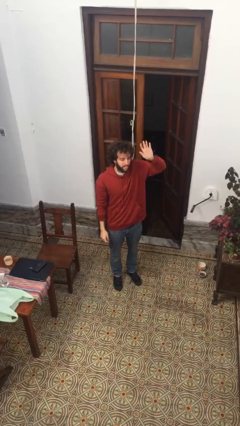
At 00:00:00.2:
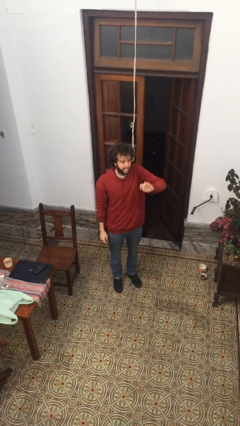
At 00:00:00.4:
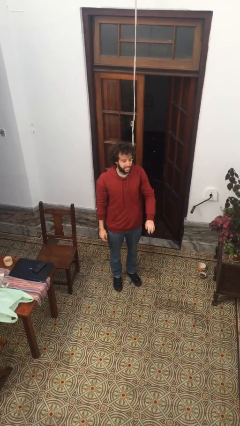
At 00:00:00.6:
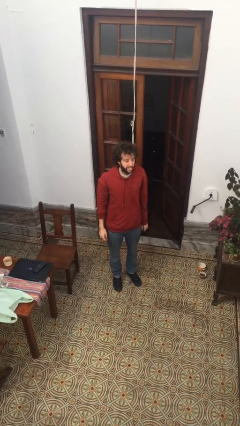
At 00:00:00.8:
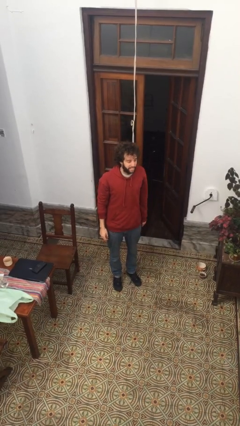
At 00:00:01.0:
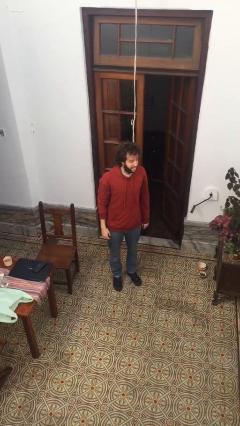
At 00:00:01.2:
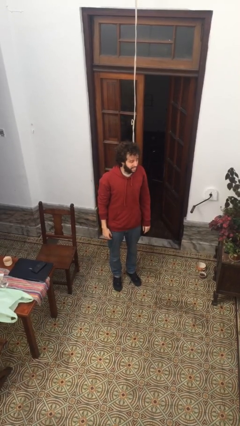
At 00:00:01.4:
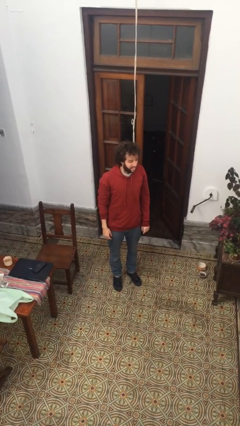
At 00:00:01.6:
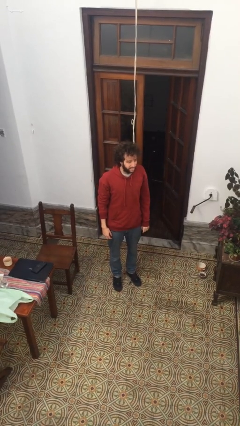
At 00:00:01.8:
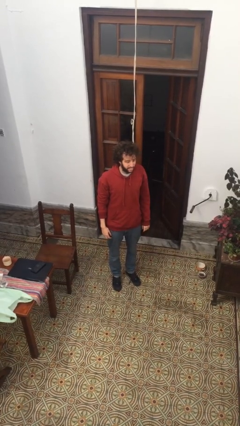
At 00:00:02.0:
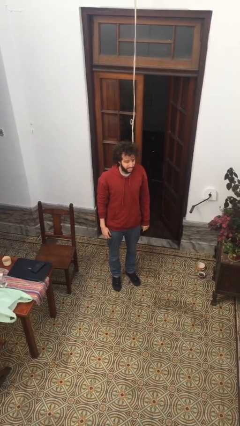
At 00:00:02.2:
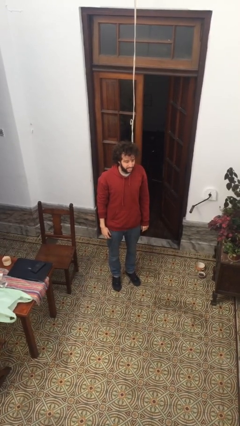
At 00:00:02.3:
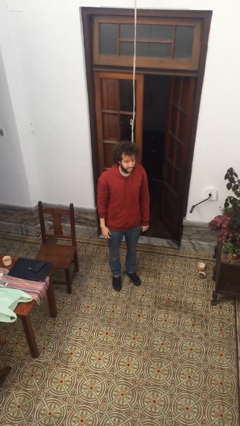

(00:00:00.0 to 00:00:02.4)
person gestures lower hand

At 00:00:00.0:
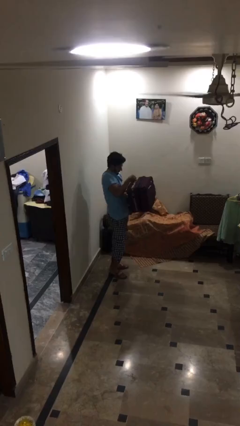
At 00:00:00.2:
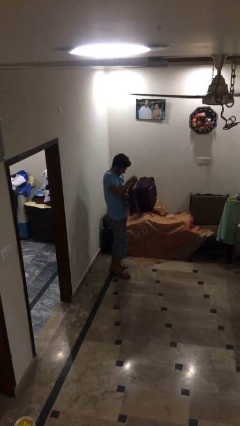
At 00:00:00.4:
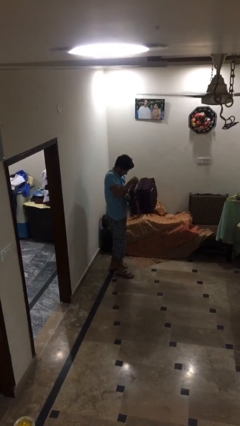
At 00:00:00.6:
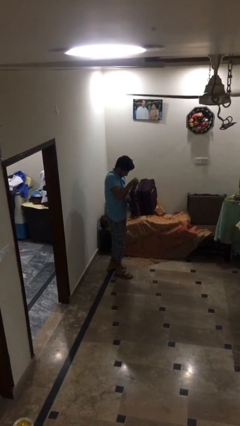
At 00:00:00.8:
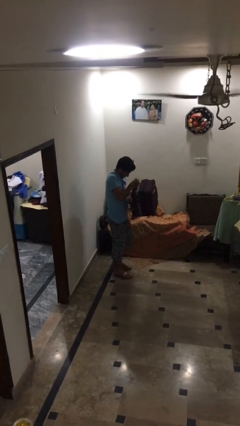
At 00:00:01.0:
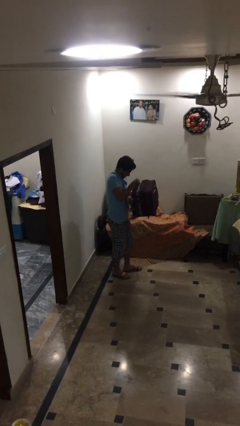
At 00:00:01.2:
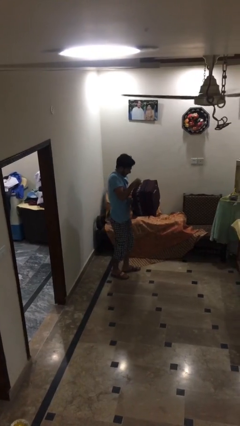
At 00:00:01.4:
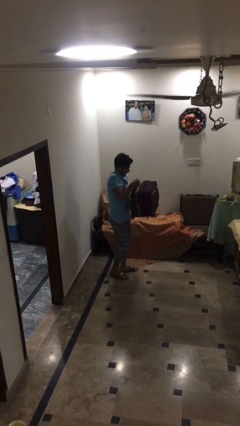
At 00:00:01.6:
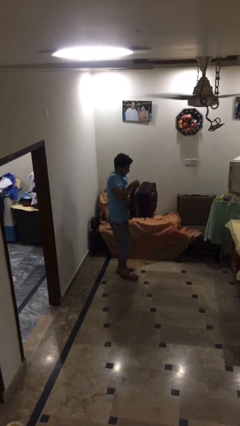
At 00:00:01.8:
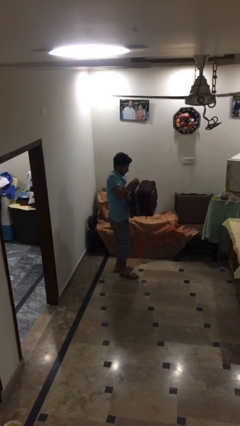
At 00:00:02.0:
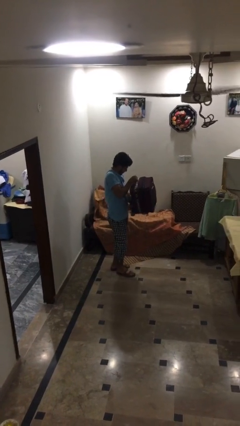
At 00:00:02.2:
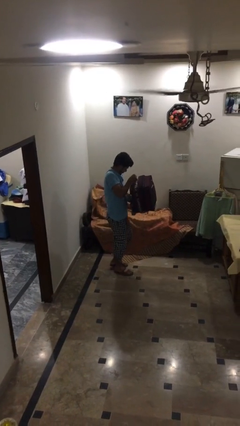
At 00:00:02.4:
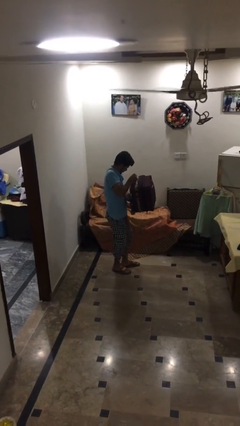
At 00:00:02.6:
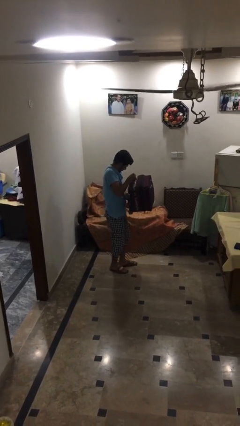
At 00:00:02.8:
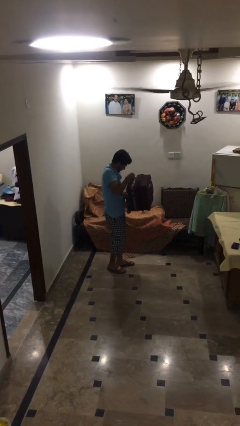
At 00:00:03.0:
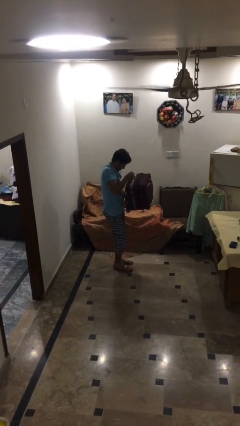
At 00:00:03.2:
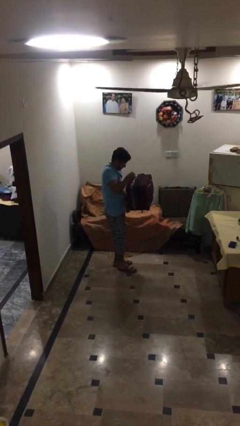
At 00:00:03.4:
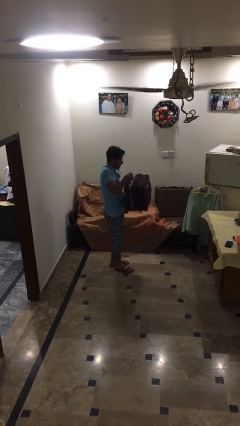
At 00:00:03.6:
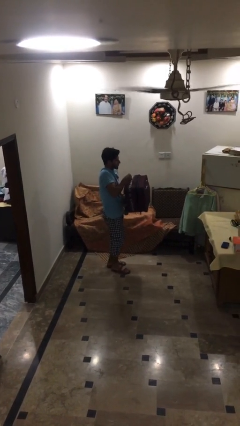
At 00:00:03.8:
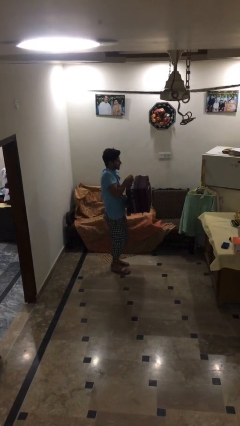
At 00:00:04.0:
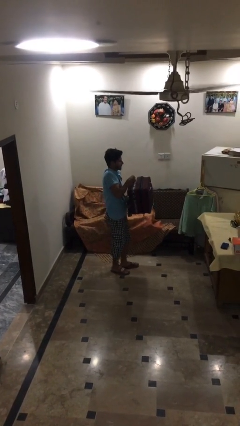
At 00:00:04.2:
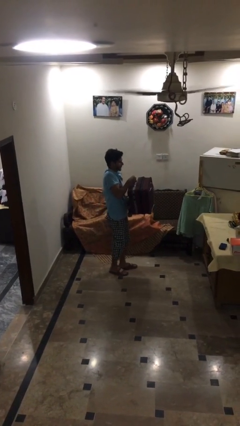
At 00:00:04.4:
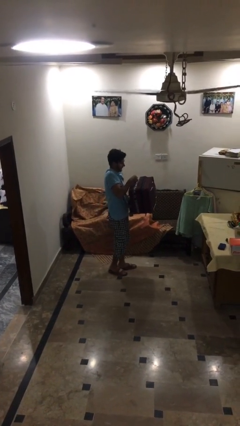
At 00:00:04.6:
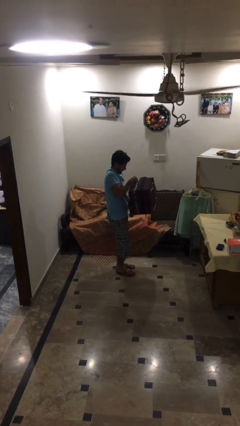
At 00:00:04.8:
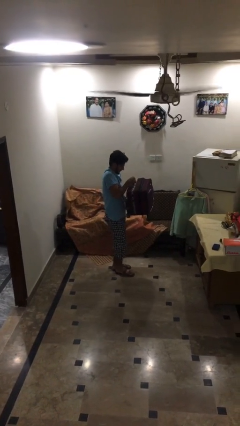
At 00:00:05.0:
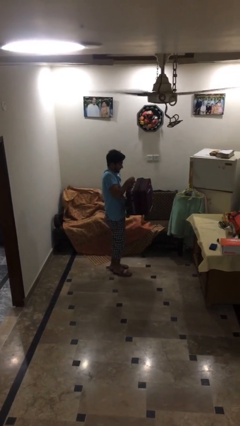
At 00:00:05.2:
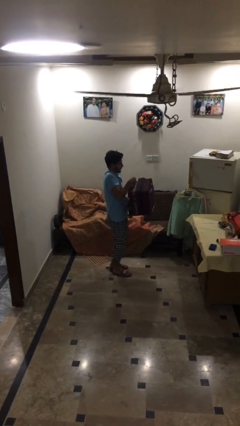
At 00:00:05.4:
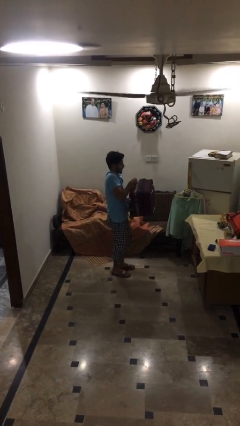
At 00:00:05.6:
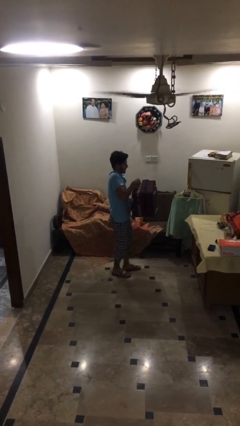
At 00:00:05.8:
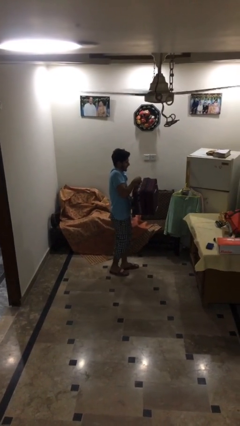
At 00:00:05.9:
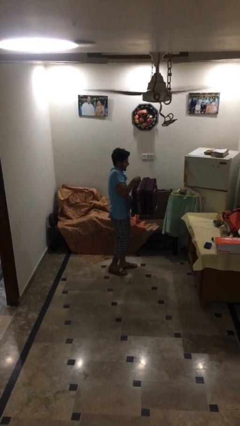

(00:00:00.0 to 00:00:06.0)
person carries heavy object

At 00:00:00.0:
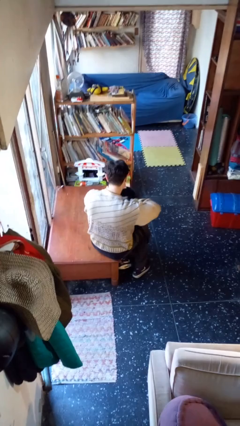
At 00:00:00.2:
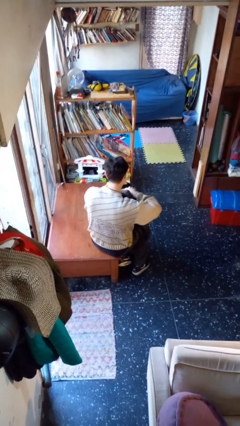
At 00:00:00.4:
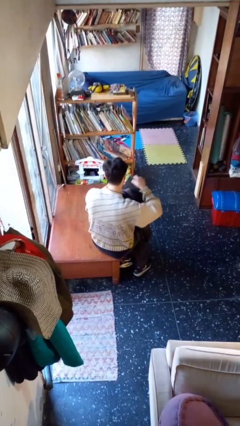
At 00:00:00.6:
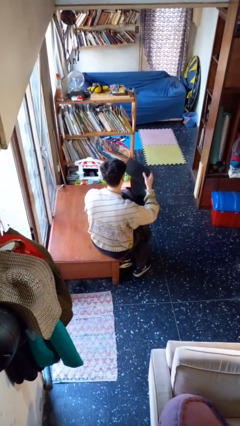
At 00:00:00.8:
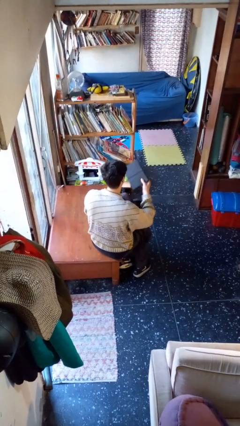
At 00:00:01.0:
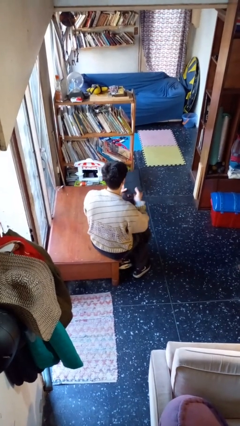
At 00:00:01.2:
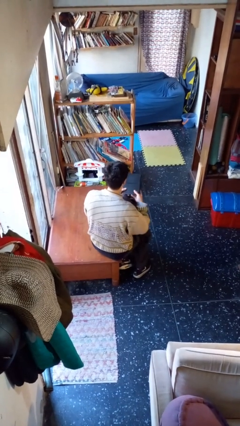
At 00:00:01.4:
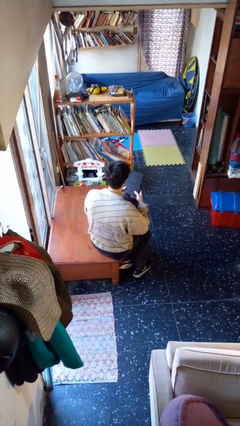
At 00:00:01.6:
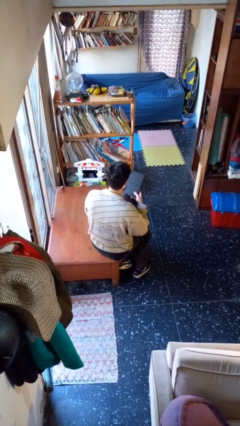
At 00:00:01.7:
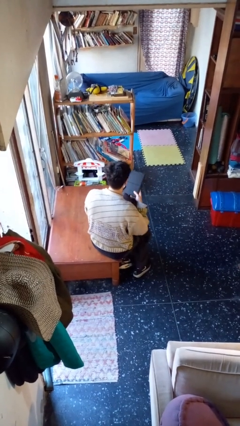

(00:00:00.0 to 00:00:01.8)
person takes object from backpack

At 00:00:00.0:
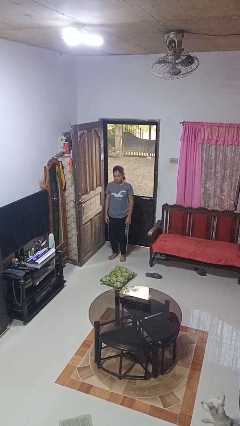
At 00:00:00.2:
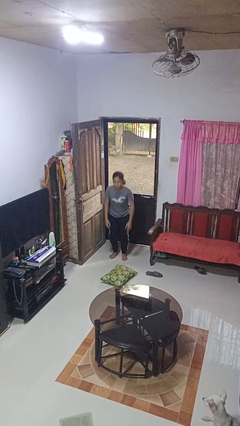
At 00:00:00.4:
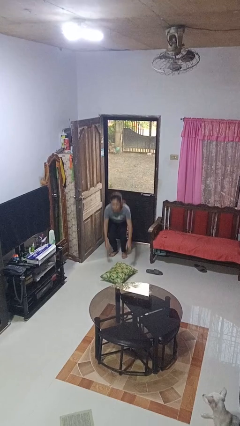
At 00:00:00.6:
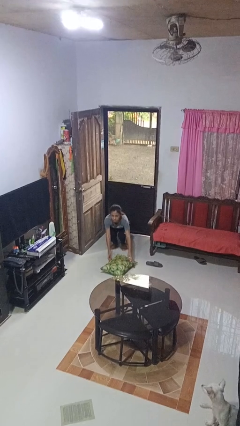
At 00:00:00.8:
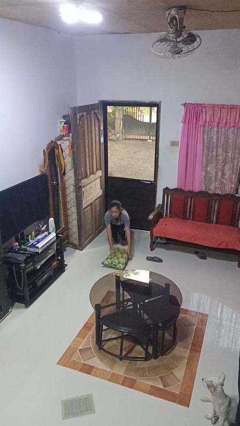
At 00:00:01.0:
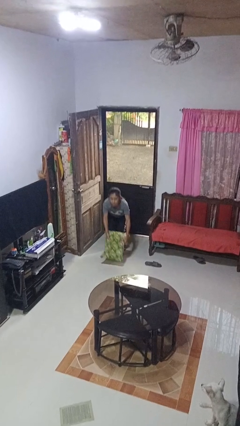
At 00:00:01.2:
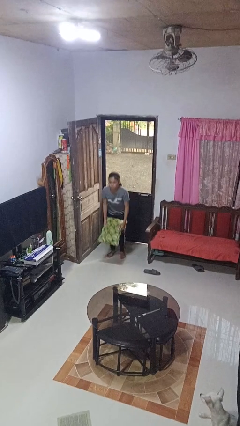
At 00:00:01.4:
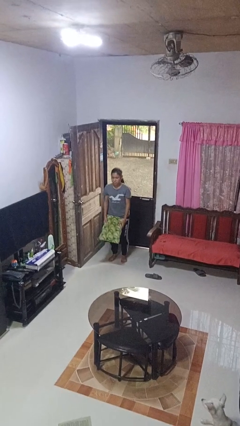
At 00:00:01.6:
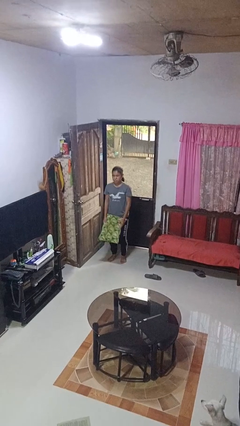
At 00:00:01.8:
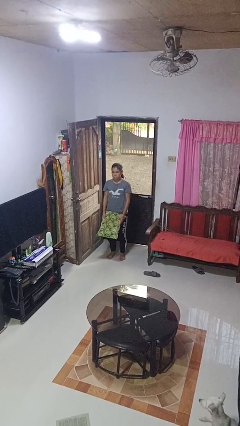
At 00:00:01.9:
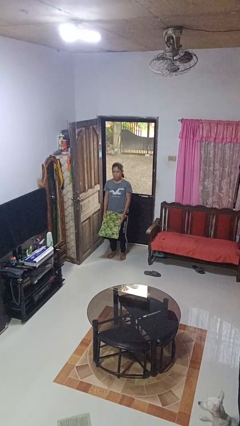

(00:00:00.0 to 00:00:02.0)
person picks up object from floor

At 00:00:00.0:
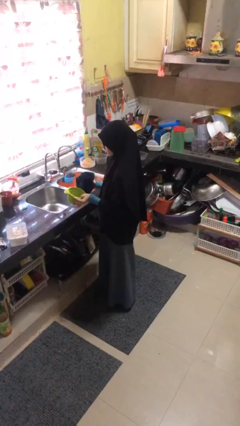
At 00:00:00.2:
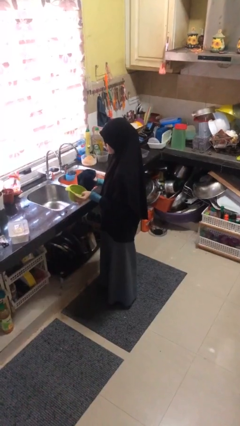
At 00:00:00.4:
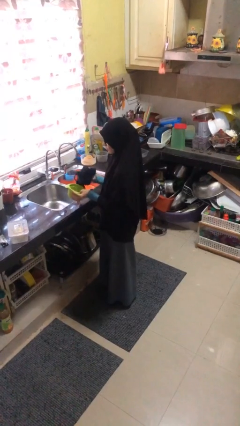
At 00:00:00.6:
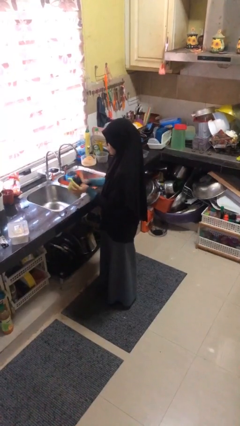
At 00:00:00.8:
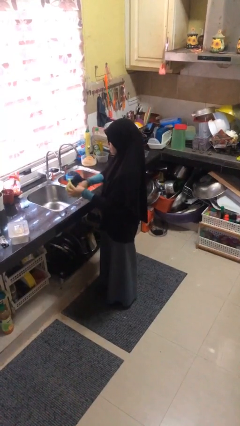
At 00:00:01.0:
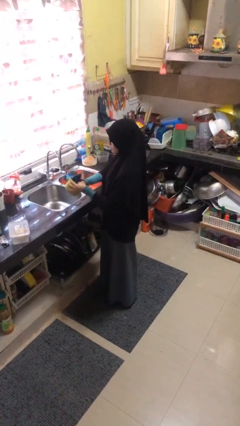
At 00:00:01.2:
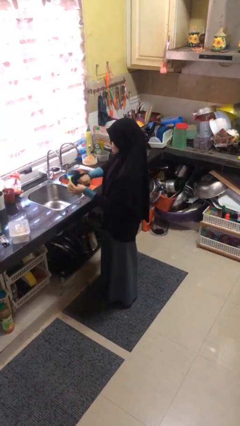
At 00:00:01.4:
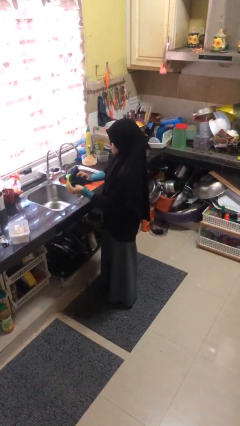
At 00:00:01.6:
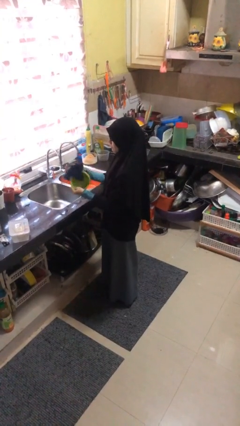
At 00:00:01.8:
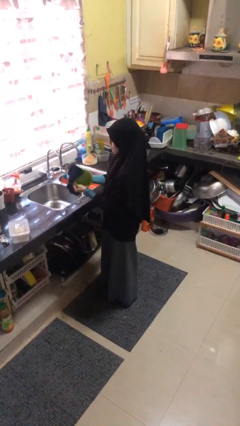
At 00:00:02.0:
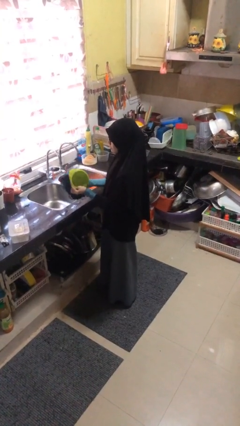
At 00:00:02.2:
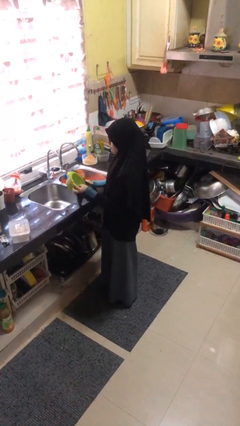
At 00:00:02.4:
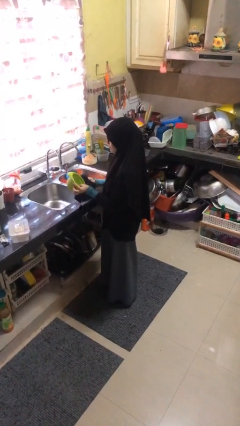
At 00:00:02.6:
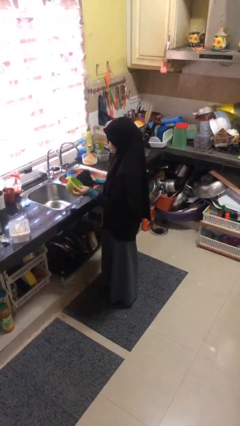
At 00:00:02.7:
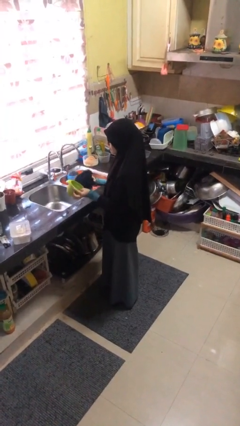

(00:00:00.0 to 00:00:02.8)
person dries dish

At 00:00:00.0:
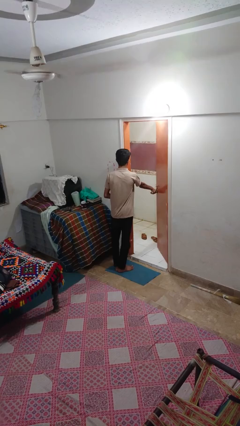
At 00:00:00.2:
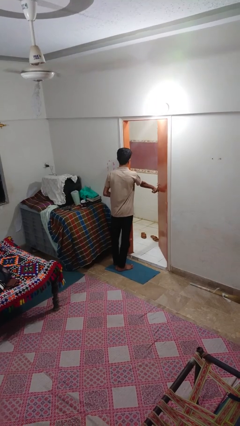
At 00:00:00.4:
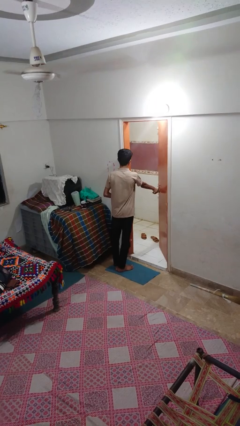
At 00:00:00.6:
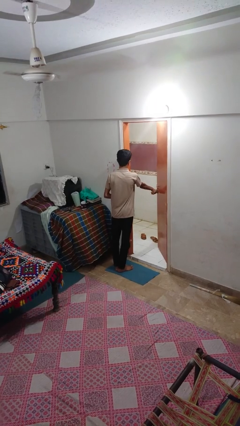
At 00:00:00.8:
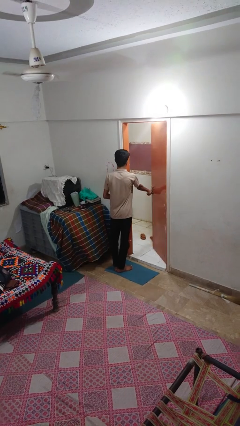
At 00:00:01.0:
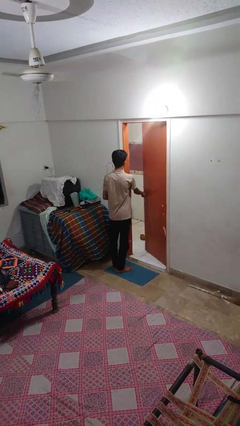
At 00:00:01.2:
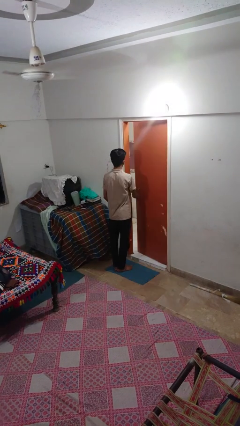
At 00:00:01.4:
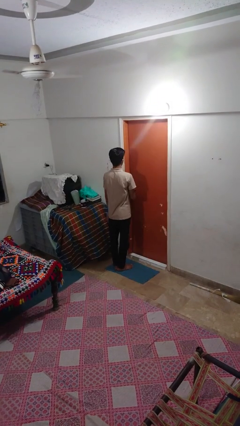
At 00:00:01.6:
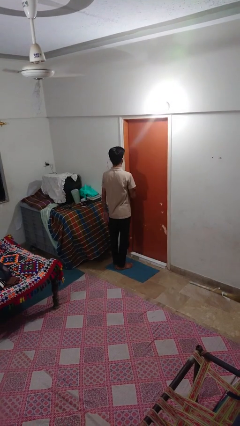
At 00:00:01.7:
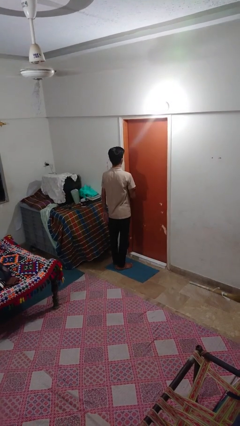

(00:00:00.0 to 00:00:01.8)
person closes facility door

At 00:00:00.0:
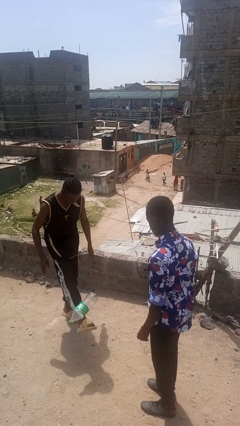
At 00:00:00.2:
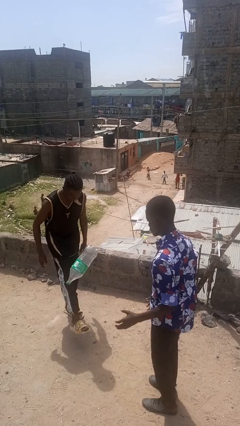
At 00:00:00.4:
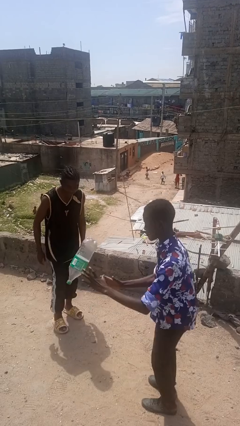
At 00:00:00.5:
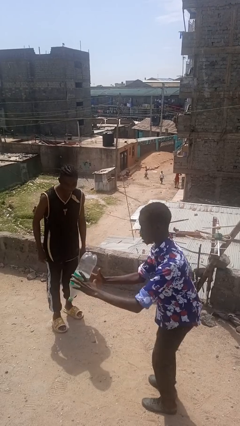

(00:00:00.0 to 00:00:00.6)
person kicks object to person
